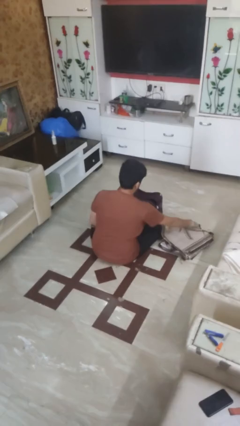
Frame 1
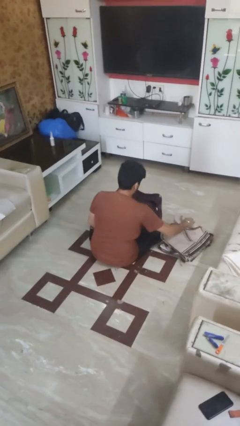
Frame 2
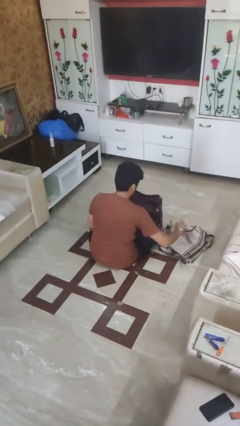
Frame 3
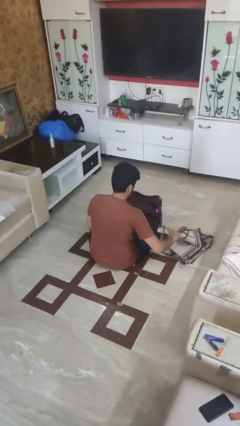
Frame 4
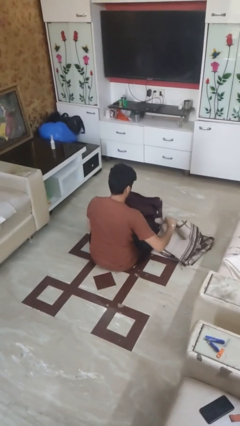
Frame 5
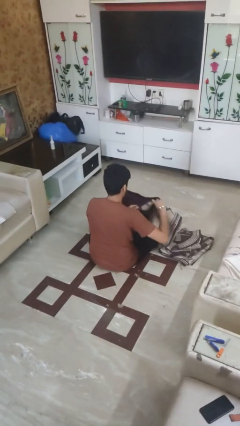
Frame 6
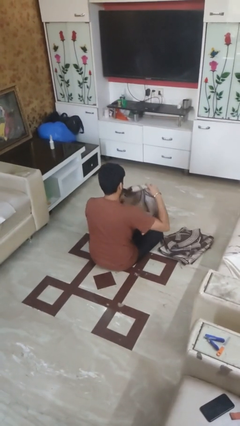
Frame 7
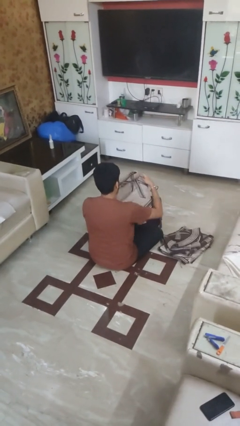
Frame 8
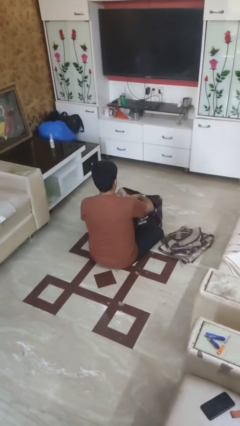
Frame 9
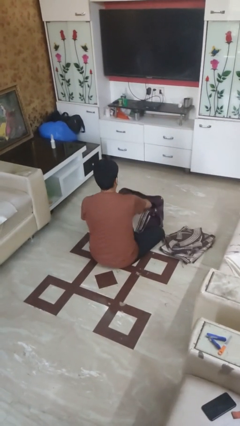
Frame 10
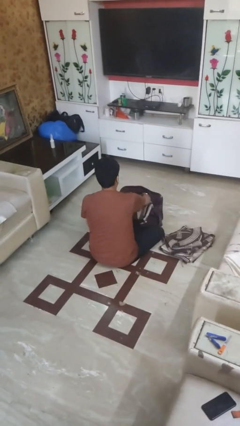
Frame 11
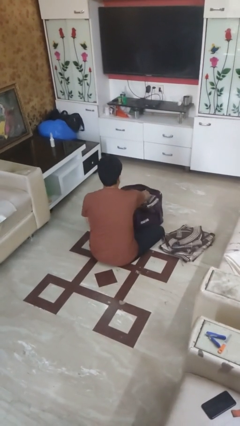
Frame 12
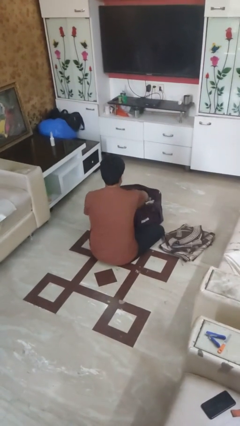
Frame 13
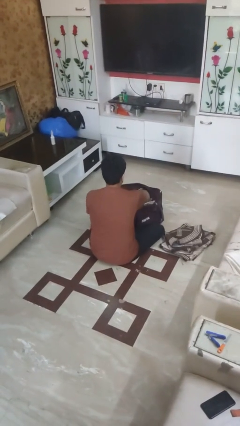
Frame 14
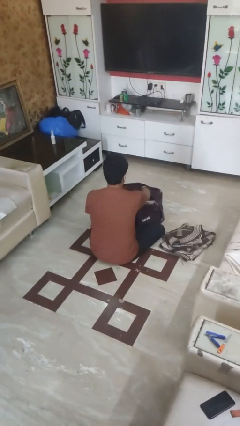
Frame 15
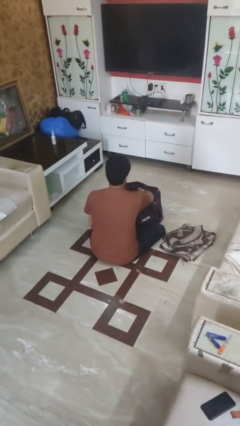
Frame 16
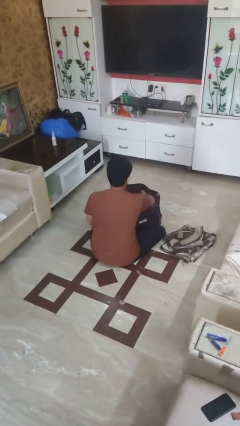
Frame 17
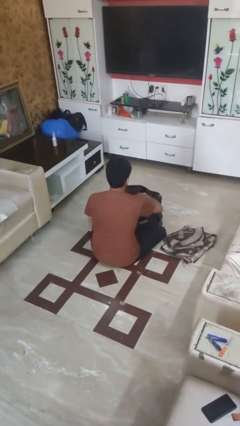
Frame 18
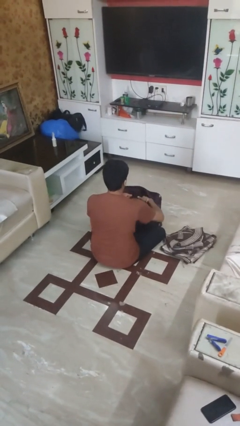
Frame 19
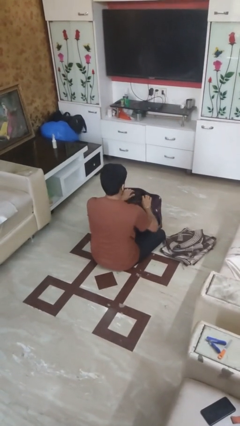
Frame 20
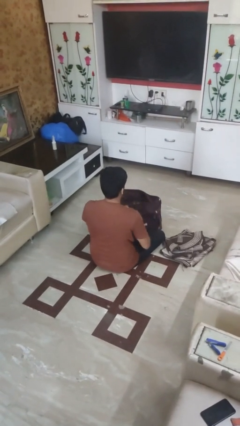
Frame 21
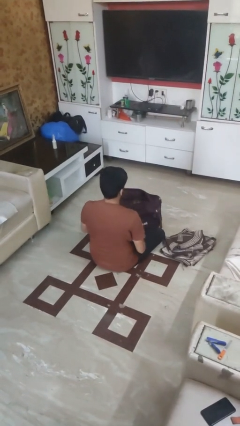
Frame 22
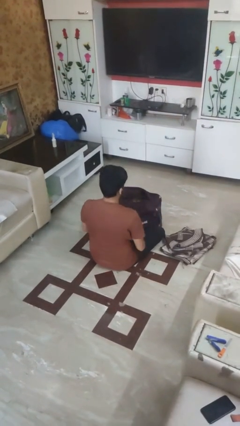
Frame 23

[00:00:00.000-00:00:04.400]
person loads clothes into suitcase

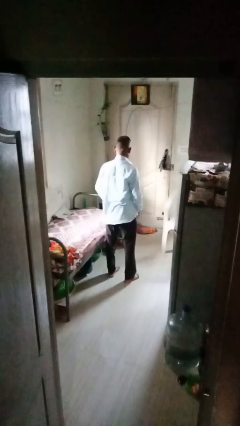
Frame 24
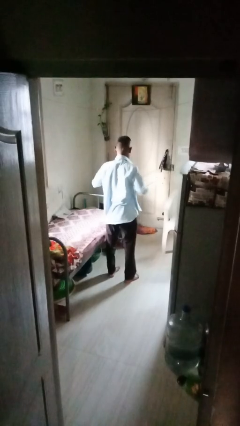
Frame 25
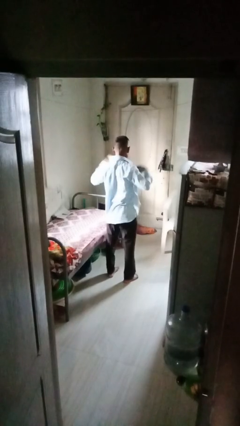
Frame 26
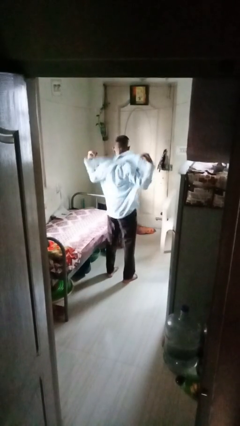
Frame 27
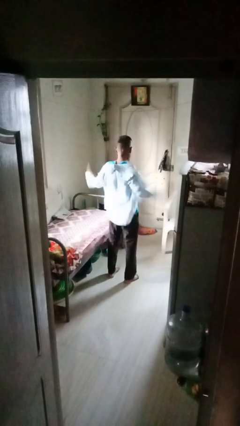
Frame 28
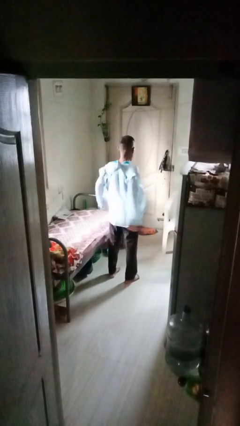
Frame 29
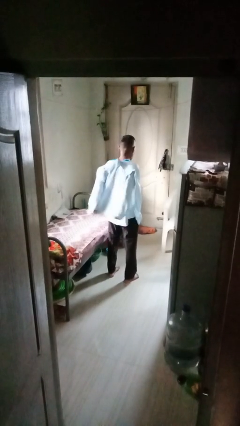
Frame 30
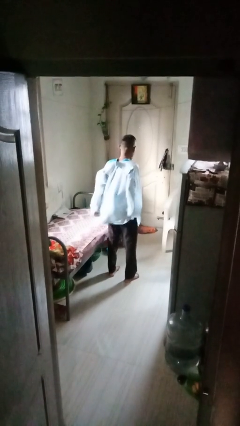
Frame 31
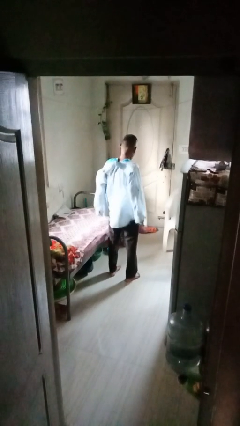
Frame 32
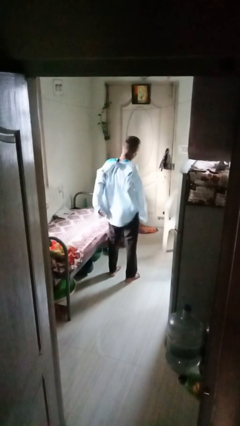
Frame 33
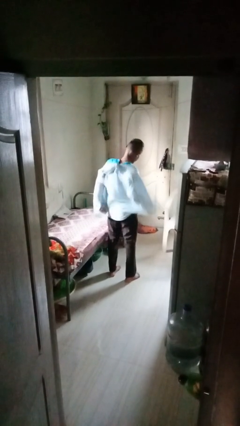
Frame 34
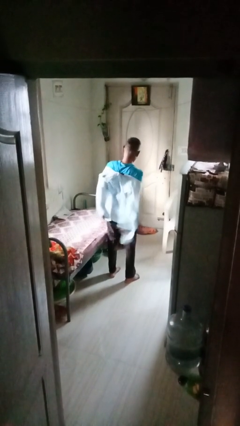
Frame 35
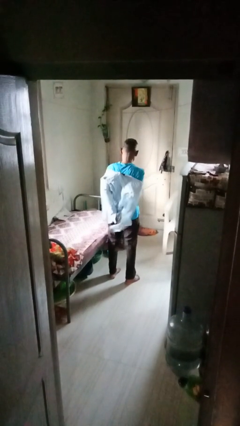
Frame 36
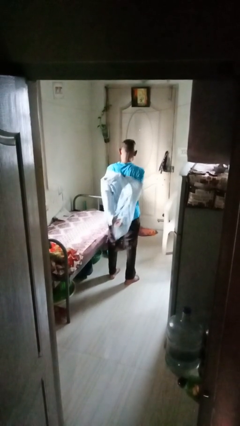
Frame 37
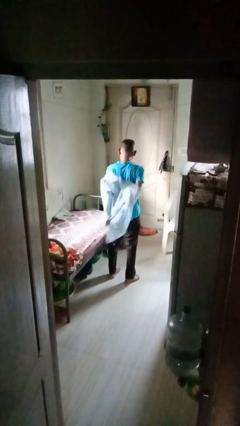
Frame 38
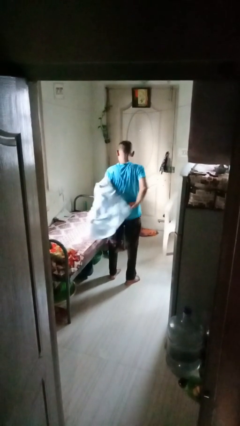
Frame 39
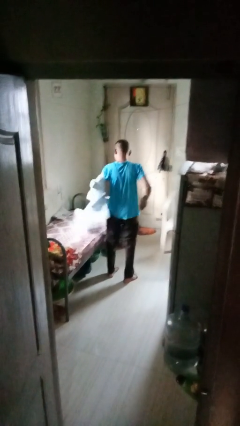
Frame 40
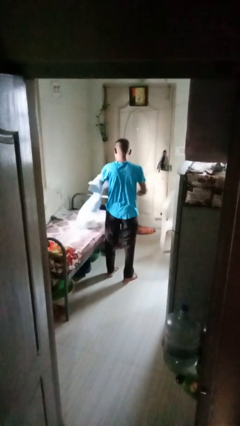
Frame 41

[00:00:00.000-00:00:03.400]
person takes off shirt

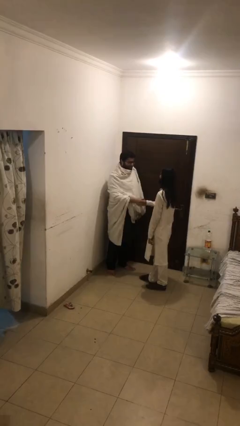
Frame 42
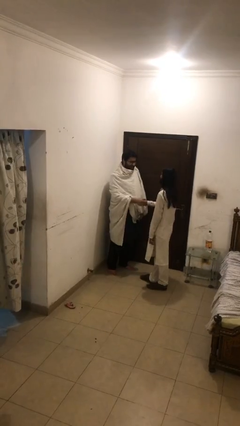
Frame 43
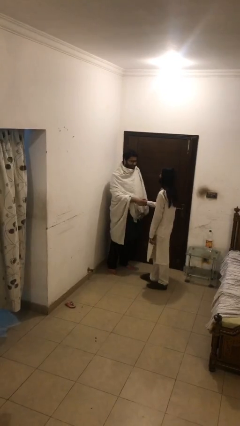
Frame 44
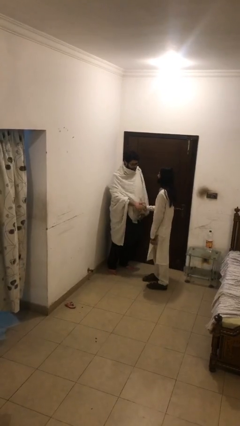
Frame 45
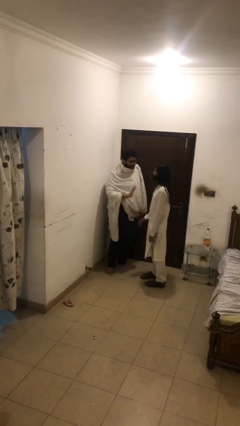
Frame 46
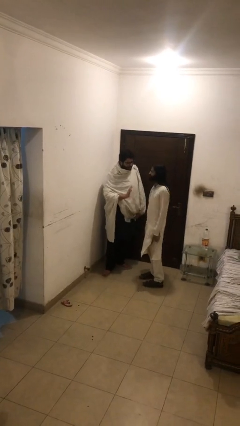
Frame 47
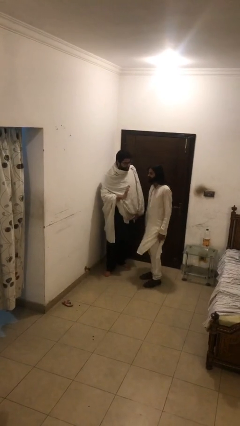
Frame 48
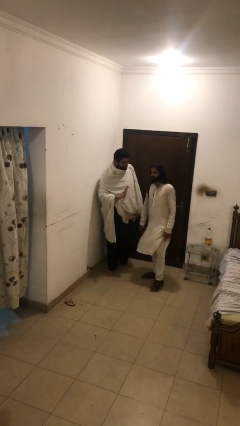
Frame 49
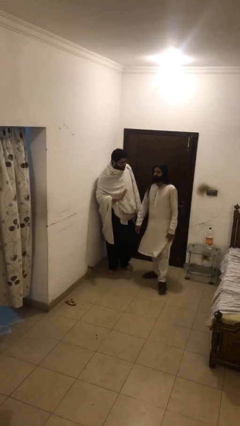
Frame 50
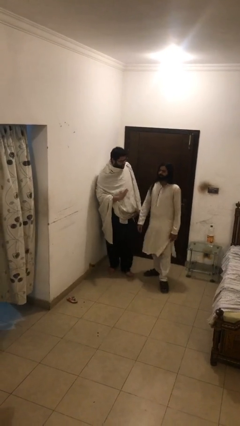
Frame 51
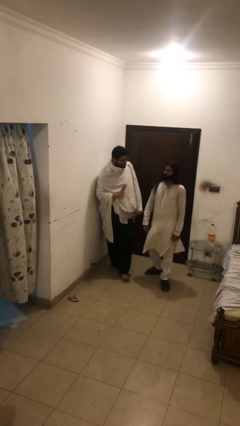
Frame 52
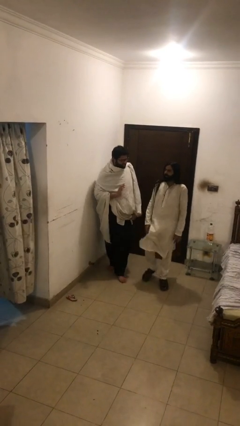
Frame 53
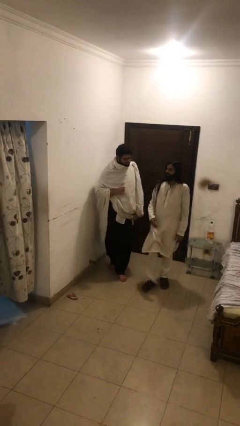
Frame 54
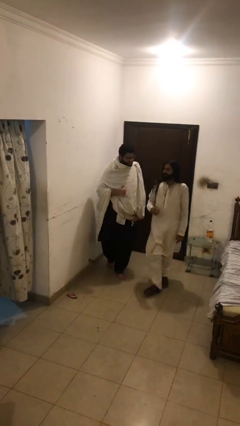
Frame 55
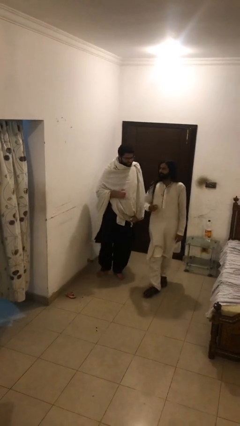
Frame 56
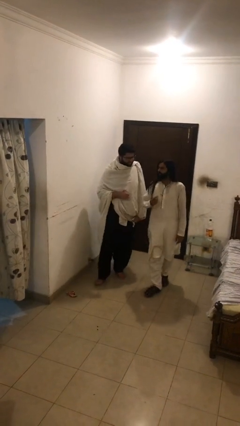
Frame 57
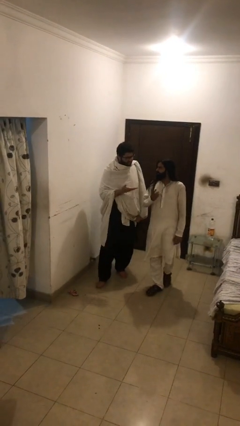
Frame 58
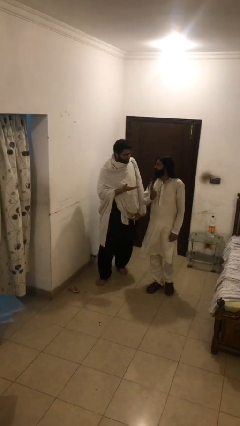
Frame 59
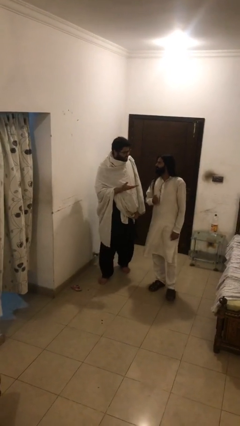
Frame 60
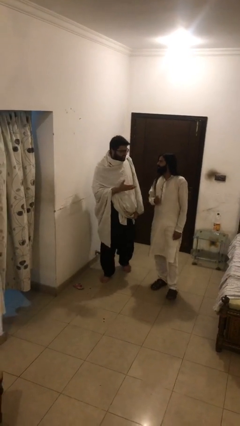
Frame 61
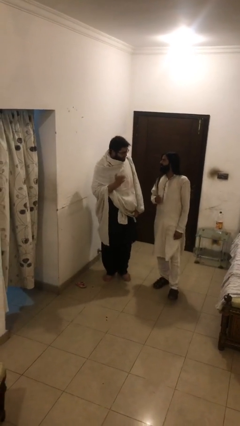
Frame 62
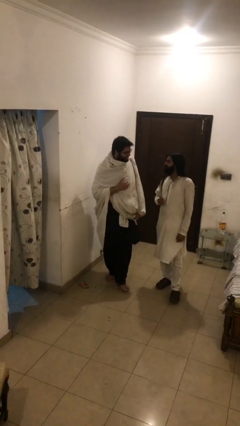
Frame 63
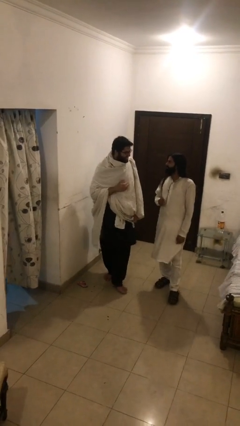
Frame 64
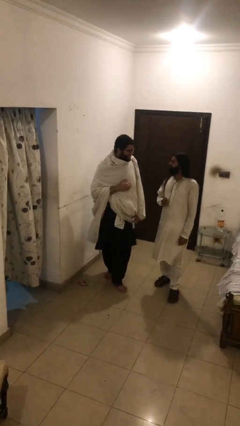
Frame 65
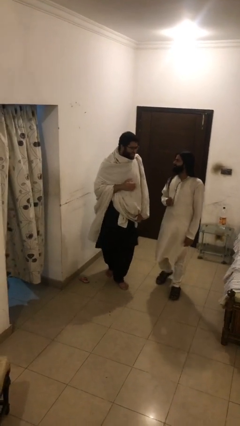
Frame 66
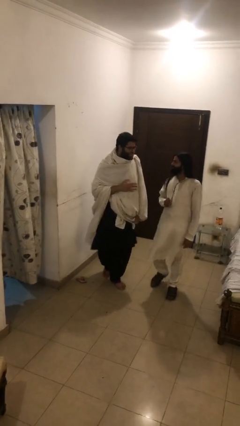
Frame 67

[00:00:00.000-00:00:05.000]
person talks to person

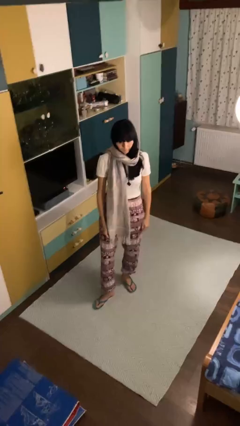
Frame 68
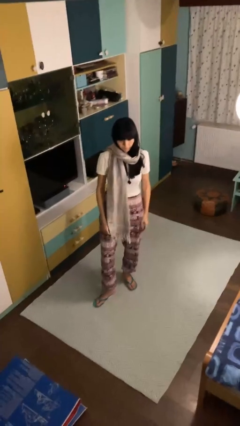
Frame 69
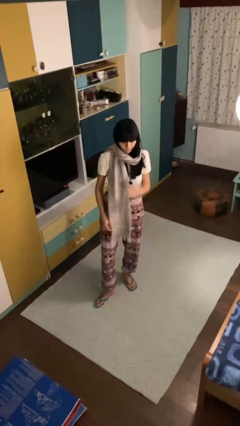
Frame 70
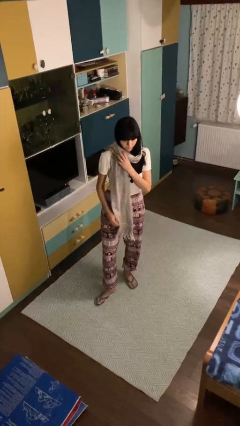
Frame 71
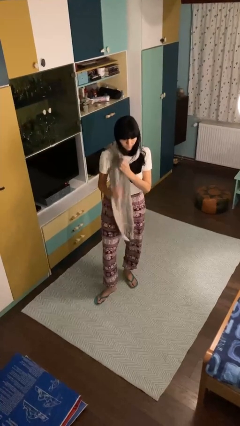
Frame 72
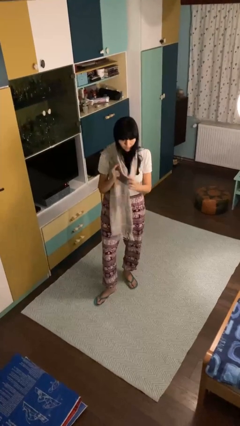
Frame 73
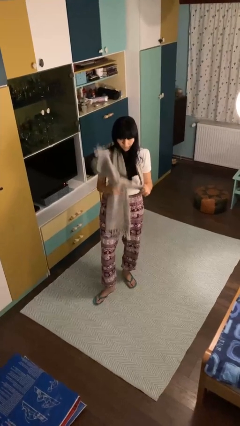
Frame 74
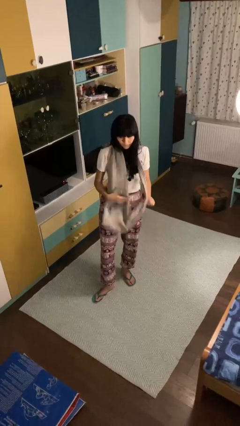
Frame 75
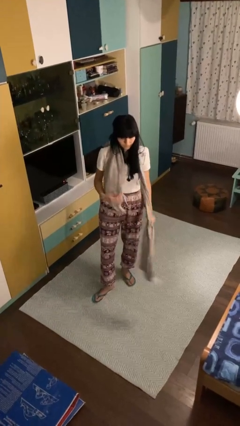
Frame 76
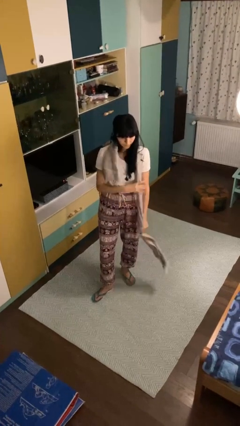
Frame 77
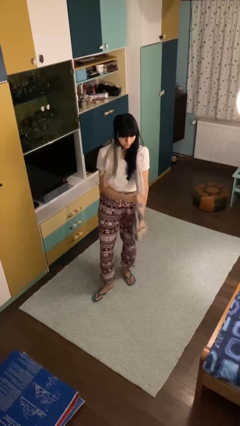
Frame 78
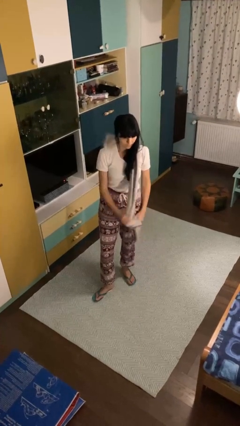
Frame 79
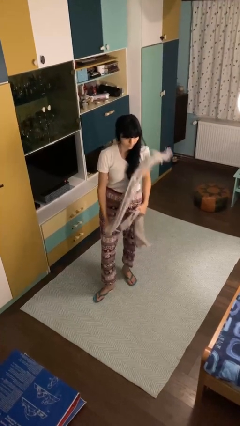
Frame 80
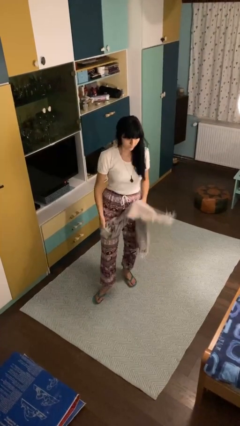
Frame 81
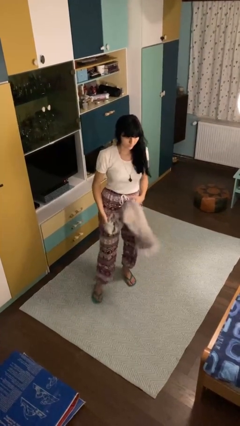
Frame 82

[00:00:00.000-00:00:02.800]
person takes off scarf

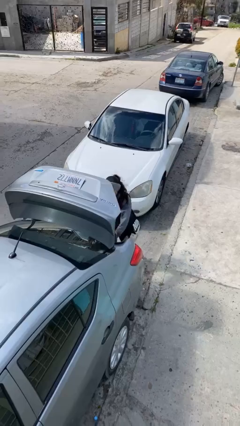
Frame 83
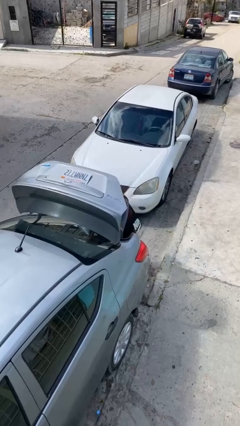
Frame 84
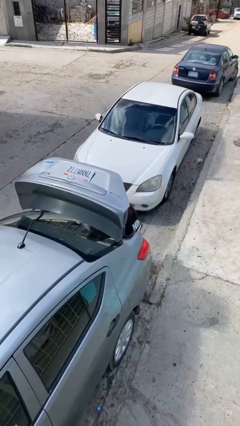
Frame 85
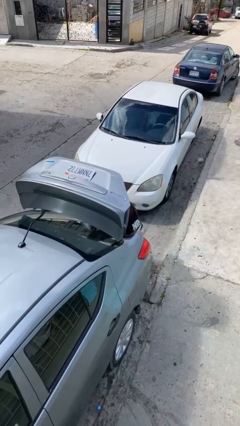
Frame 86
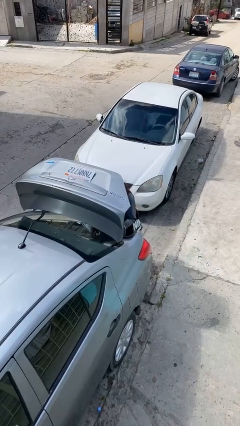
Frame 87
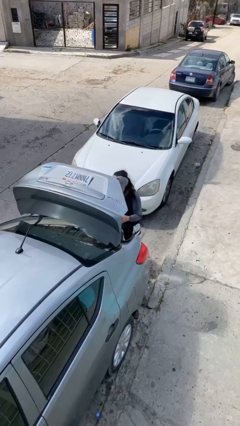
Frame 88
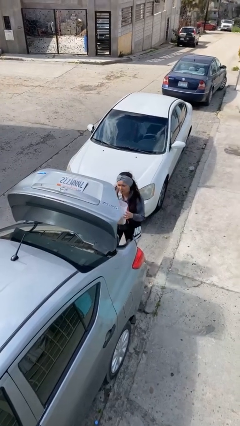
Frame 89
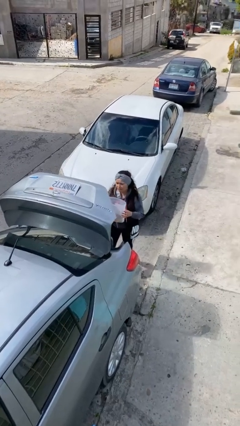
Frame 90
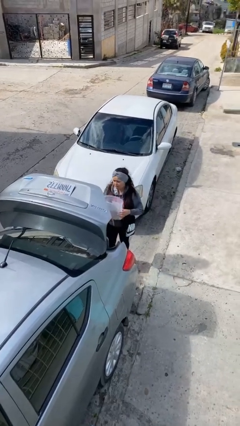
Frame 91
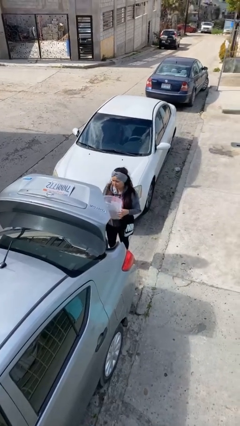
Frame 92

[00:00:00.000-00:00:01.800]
person unloads car
